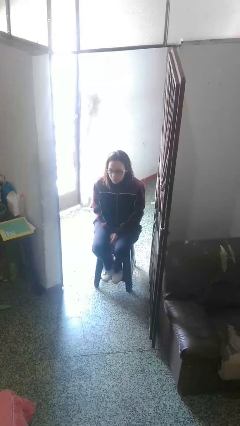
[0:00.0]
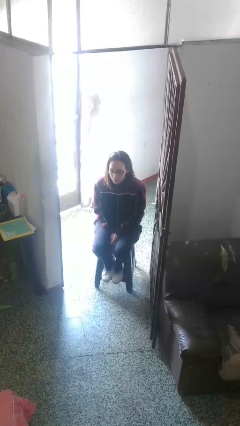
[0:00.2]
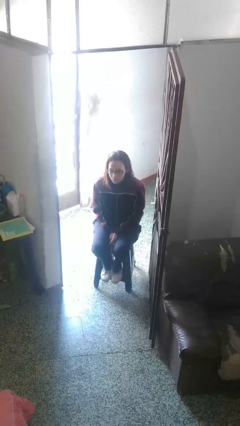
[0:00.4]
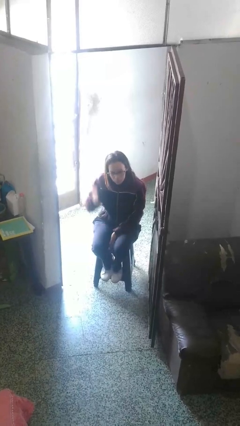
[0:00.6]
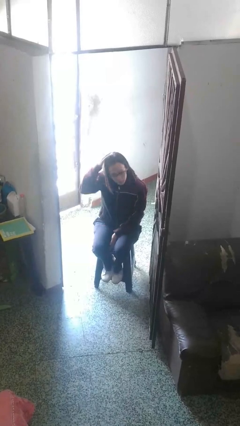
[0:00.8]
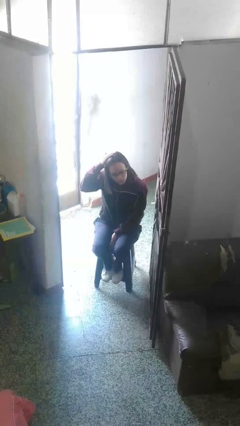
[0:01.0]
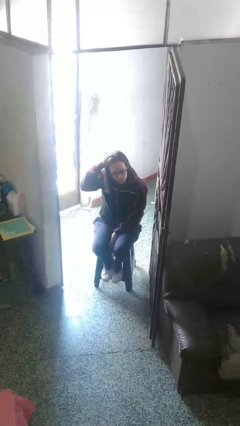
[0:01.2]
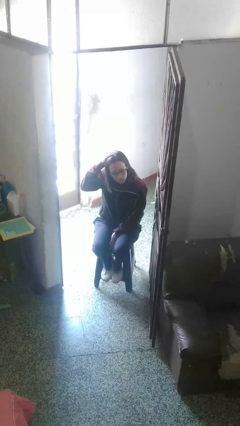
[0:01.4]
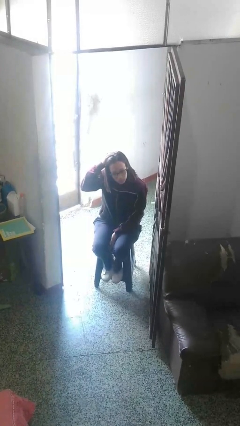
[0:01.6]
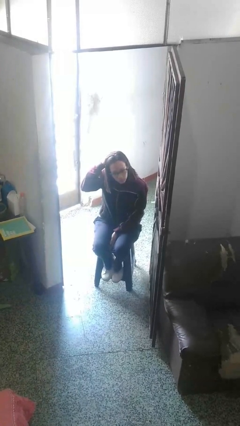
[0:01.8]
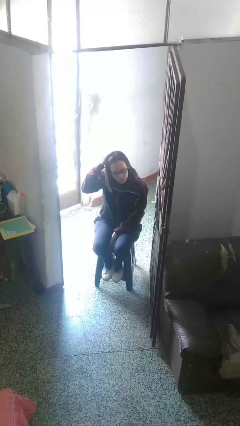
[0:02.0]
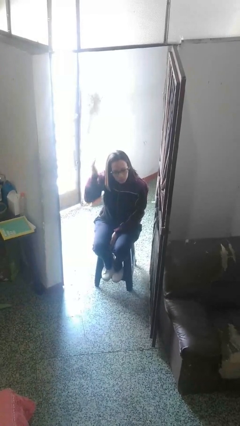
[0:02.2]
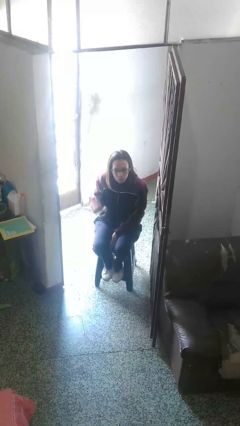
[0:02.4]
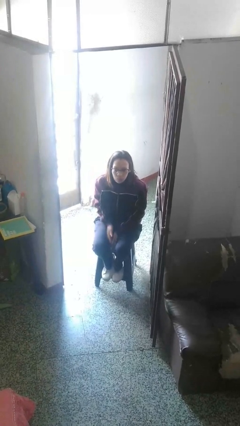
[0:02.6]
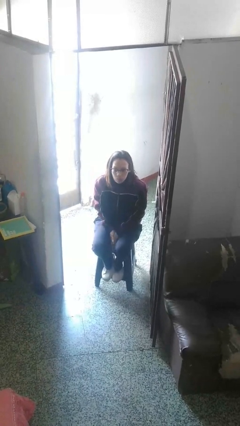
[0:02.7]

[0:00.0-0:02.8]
person pats head

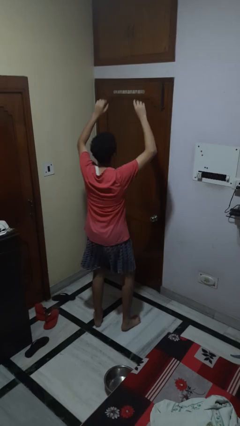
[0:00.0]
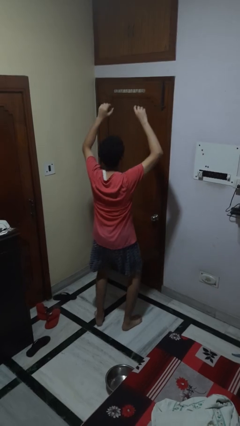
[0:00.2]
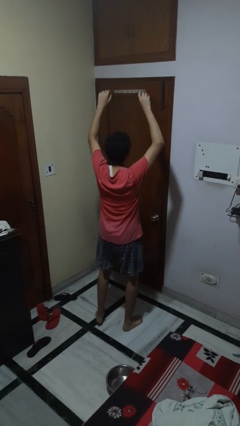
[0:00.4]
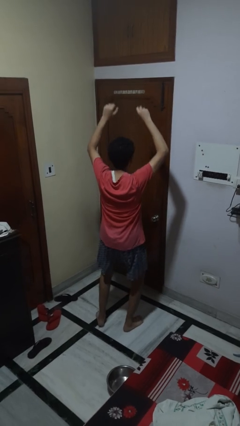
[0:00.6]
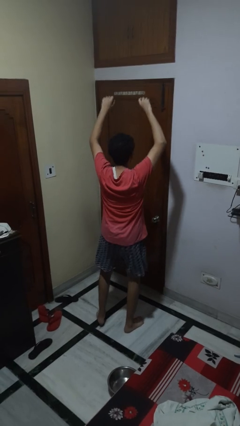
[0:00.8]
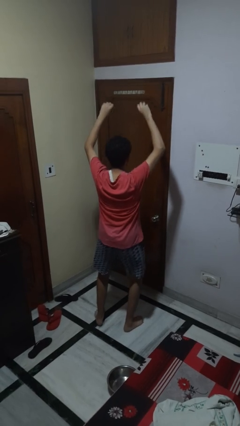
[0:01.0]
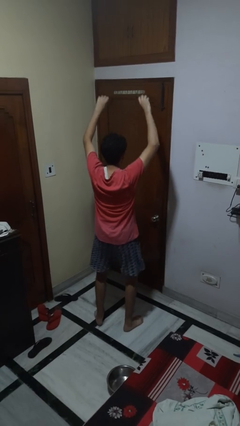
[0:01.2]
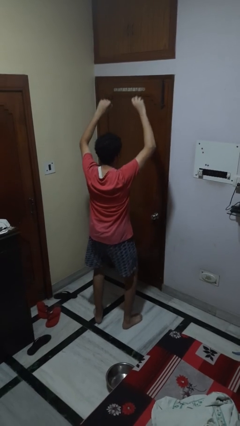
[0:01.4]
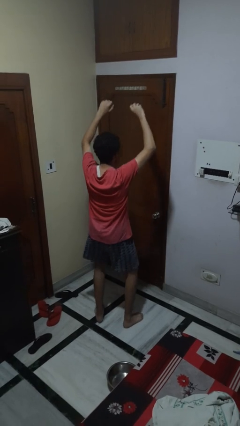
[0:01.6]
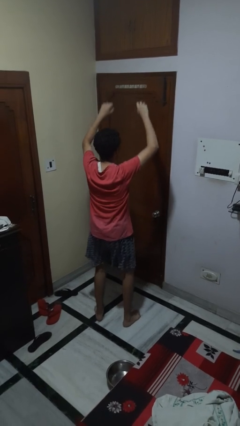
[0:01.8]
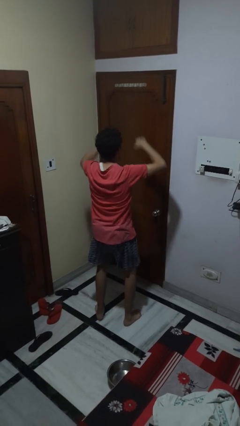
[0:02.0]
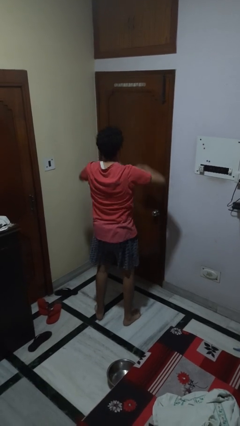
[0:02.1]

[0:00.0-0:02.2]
person dances in place

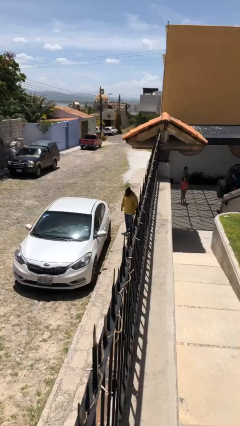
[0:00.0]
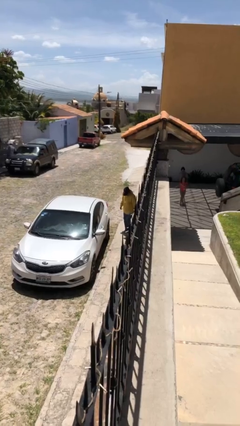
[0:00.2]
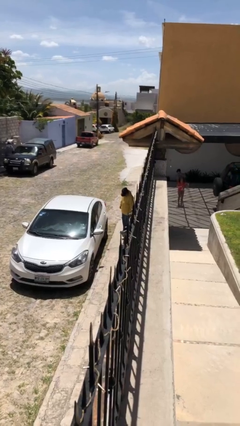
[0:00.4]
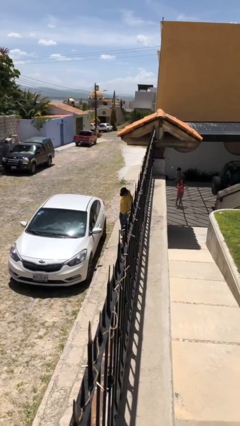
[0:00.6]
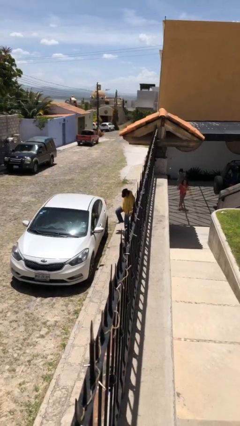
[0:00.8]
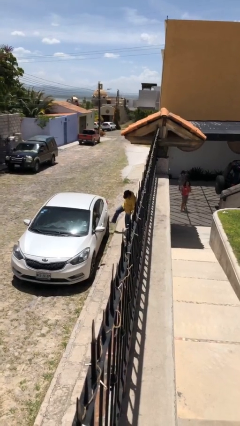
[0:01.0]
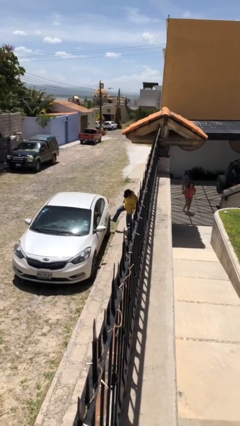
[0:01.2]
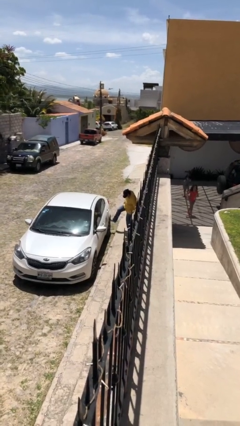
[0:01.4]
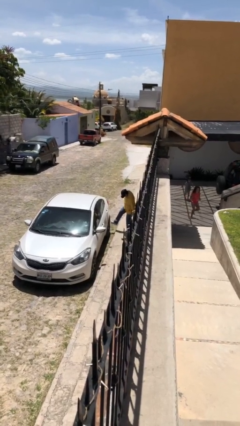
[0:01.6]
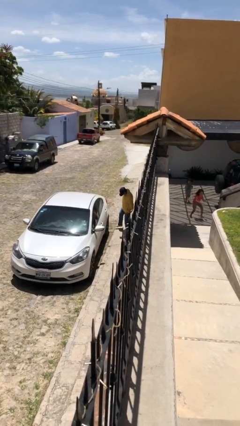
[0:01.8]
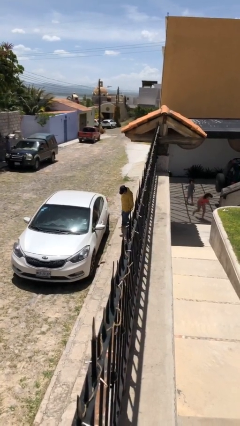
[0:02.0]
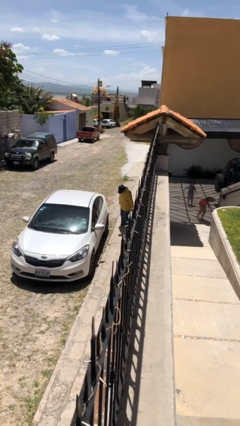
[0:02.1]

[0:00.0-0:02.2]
person kicks car tires

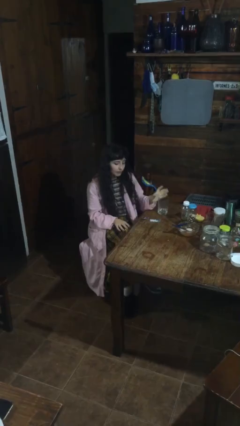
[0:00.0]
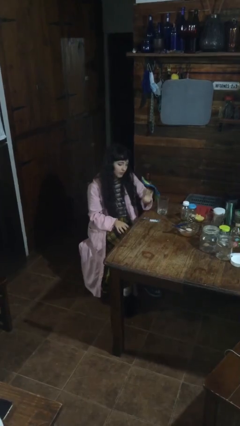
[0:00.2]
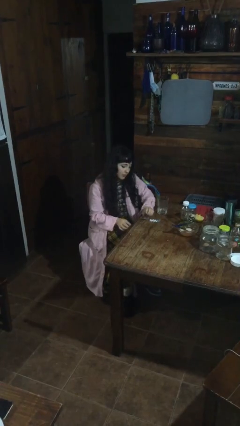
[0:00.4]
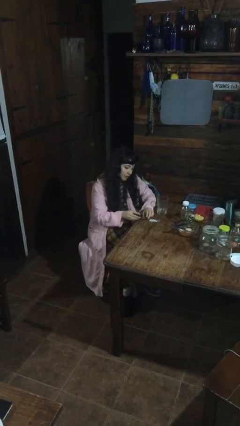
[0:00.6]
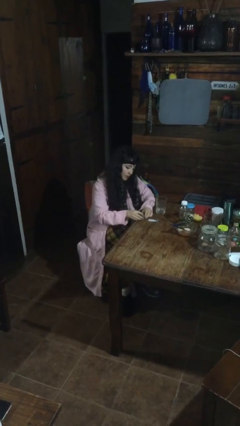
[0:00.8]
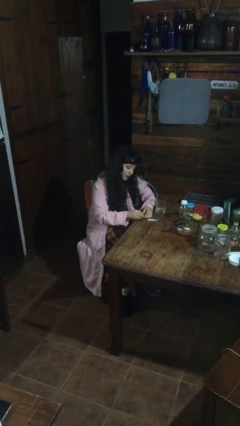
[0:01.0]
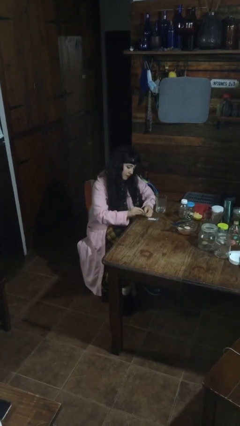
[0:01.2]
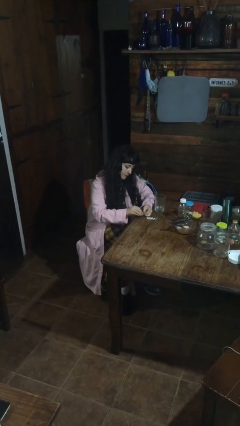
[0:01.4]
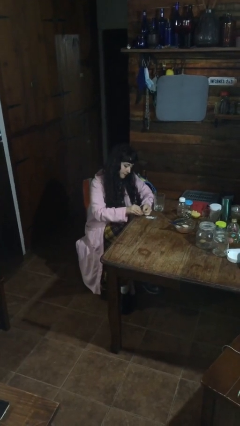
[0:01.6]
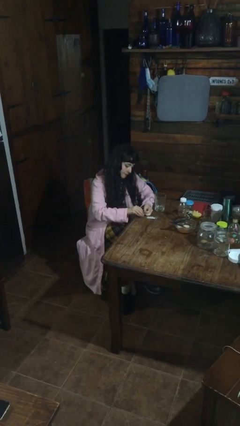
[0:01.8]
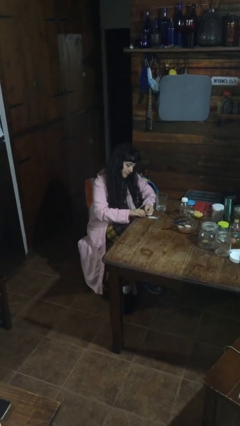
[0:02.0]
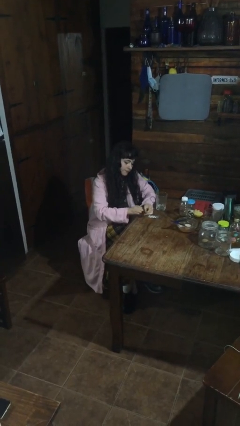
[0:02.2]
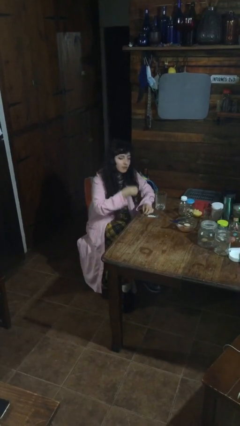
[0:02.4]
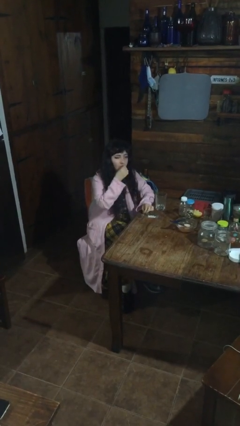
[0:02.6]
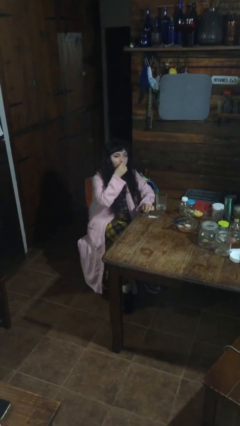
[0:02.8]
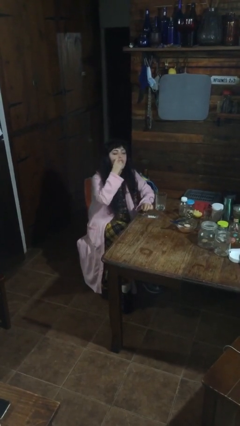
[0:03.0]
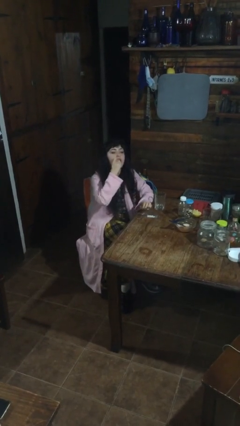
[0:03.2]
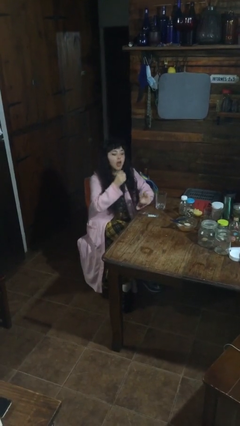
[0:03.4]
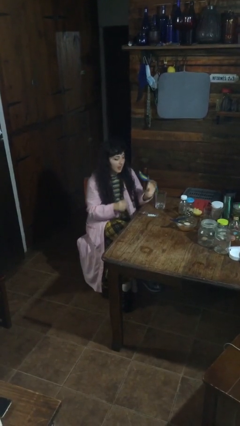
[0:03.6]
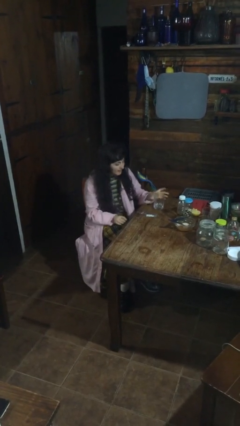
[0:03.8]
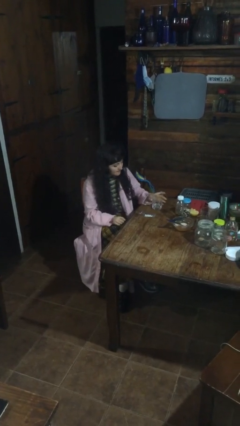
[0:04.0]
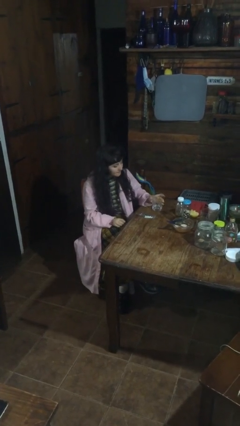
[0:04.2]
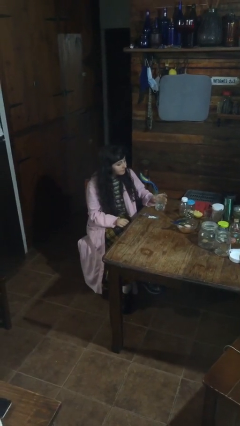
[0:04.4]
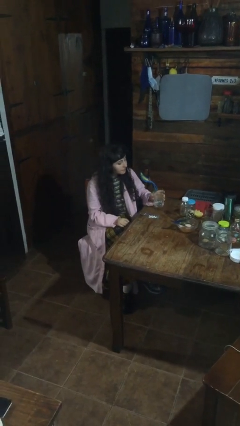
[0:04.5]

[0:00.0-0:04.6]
person takes medicine pills

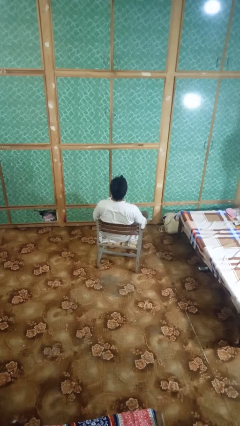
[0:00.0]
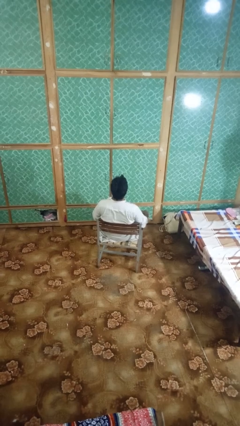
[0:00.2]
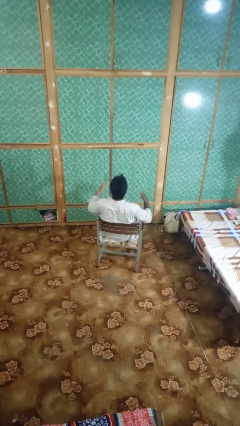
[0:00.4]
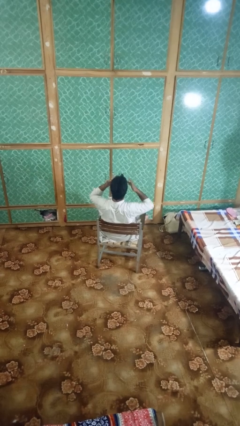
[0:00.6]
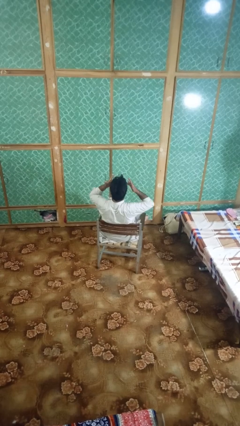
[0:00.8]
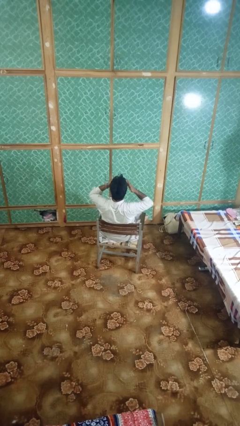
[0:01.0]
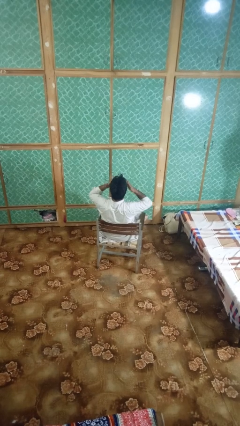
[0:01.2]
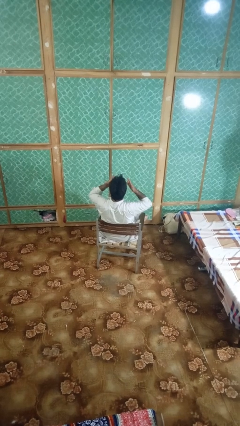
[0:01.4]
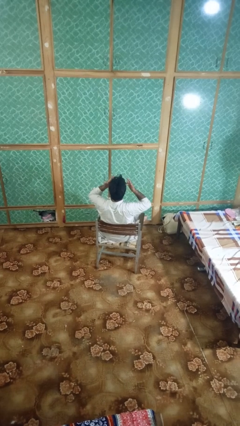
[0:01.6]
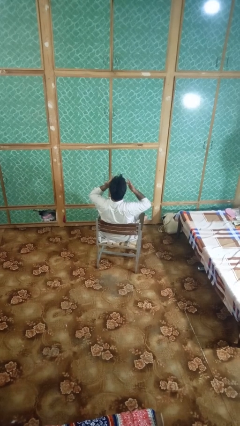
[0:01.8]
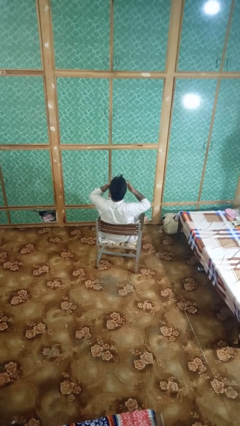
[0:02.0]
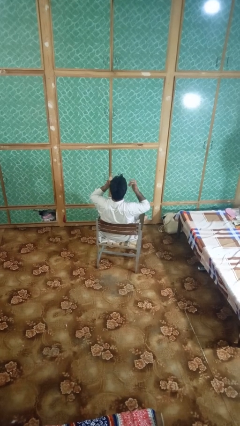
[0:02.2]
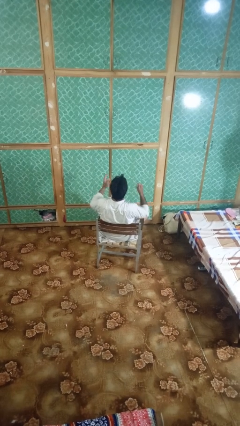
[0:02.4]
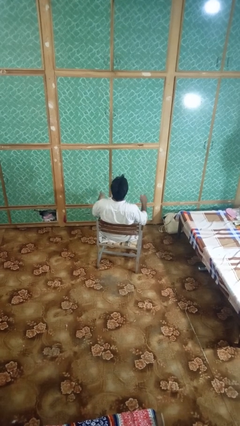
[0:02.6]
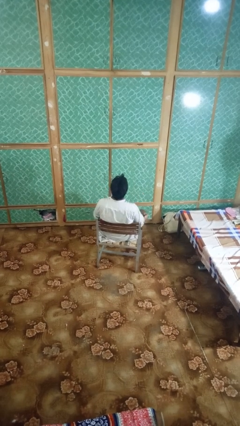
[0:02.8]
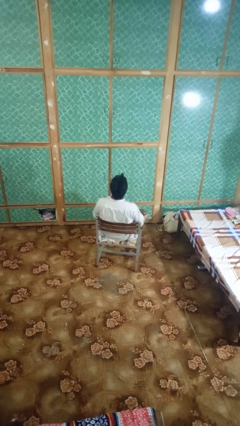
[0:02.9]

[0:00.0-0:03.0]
person rubs eyes

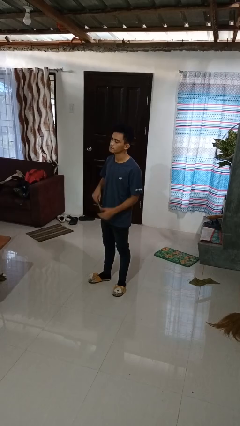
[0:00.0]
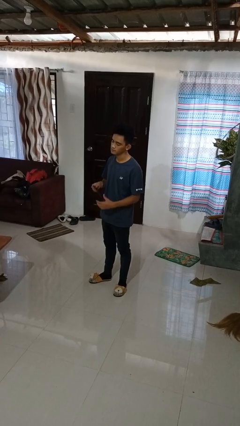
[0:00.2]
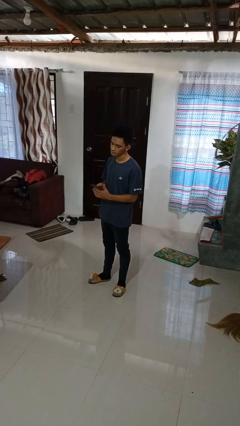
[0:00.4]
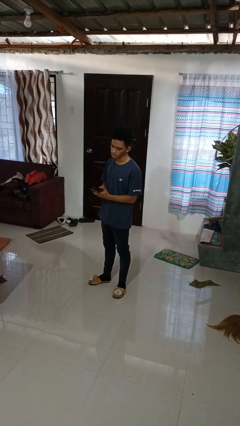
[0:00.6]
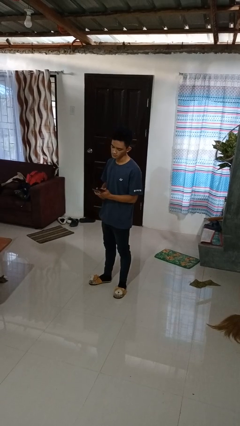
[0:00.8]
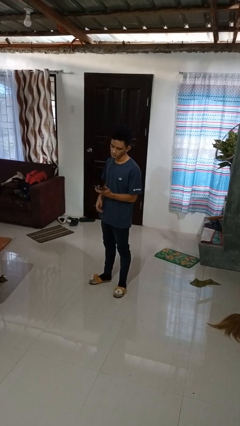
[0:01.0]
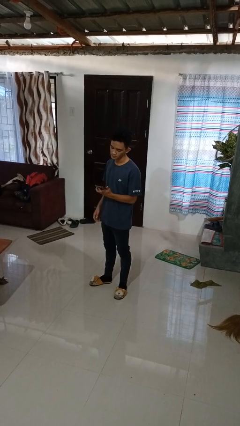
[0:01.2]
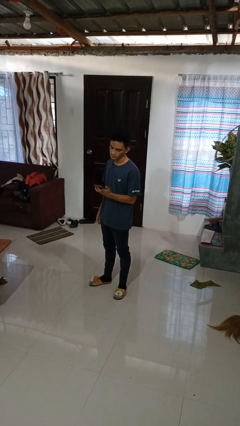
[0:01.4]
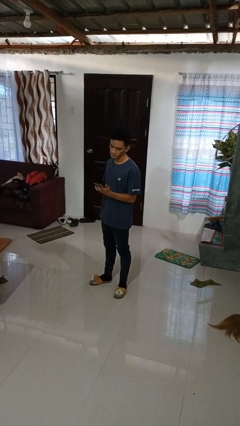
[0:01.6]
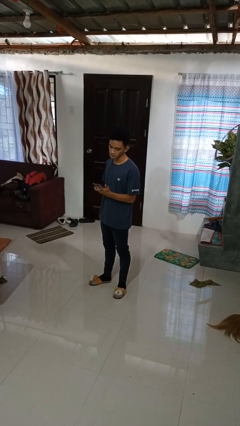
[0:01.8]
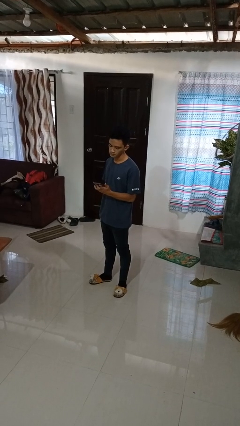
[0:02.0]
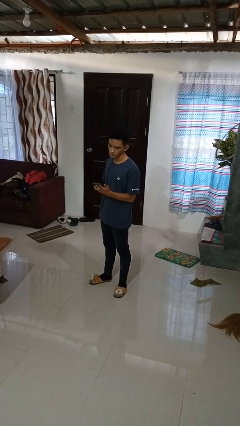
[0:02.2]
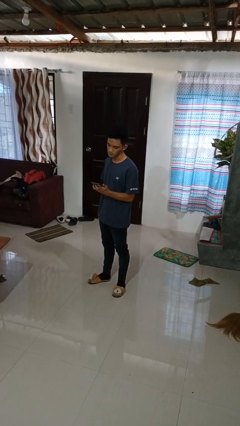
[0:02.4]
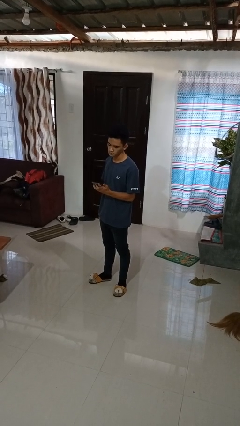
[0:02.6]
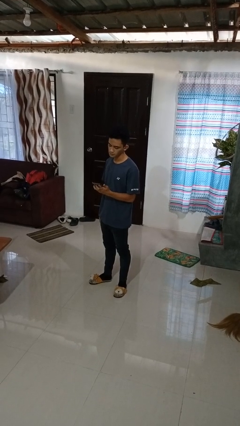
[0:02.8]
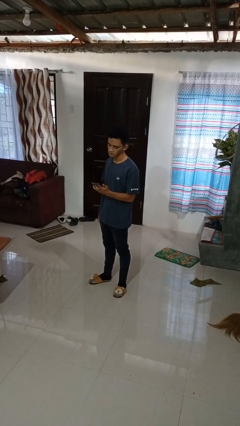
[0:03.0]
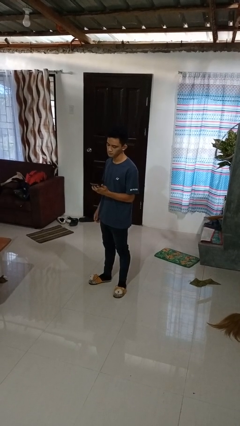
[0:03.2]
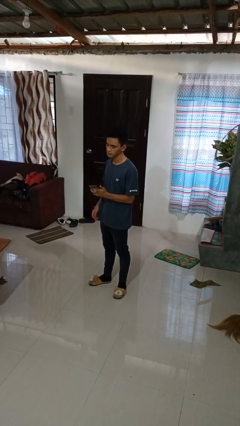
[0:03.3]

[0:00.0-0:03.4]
person takes phone from pocket
